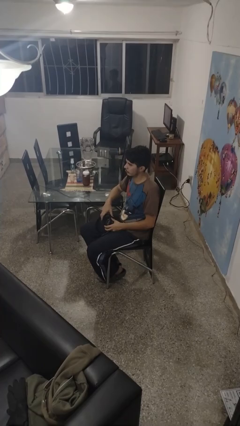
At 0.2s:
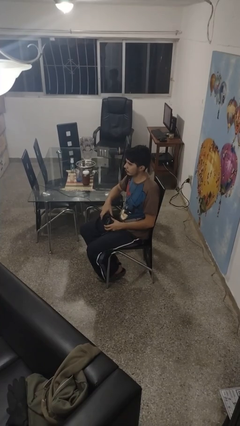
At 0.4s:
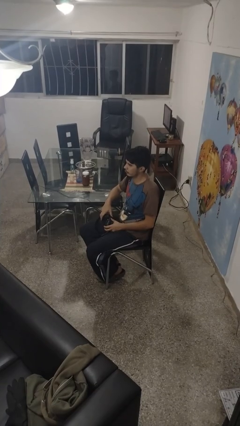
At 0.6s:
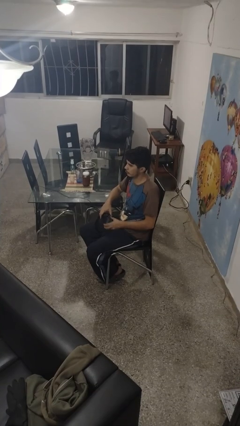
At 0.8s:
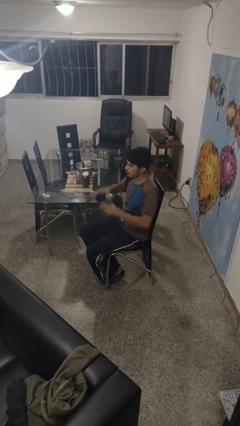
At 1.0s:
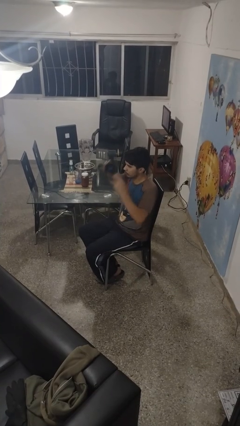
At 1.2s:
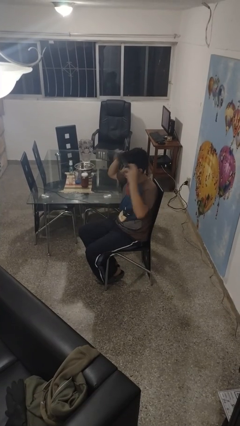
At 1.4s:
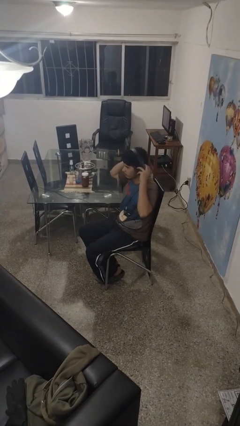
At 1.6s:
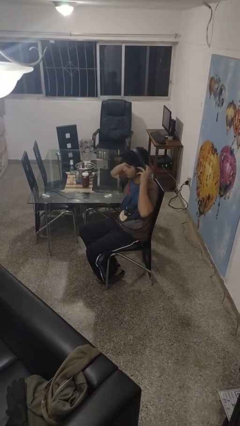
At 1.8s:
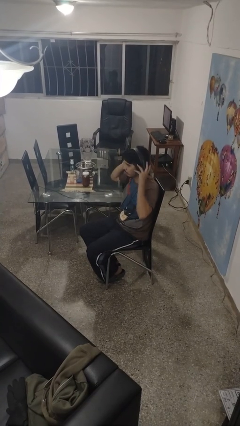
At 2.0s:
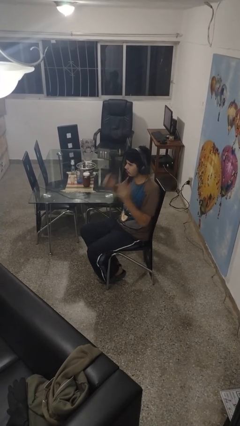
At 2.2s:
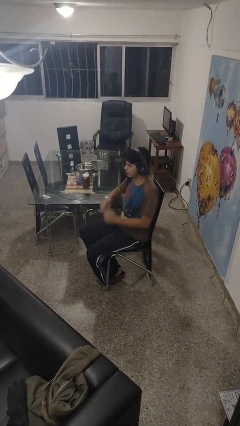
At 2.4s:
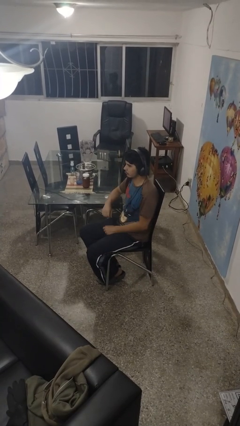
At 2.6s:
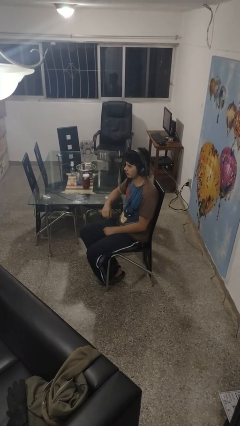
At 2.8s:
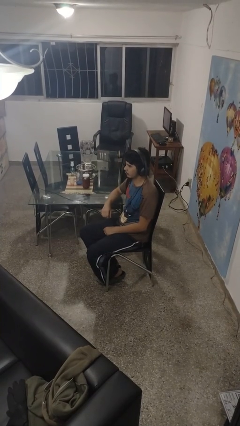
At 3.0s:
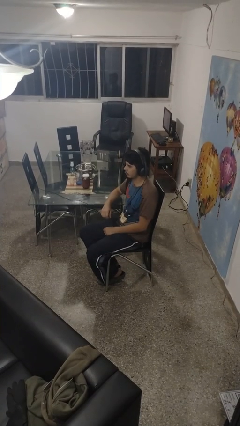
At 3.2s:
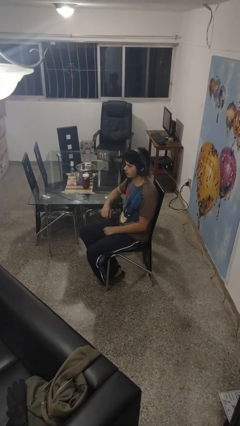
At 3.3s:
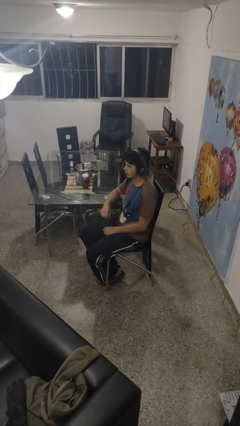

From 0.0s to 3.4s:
person puts on headphones

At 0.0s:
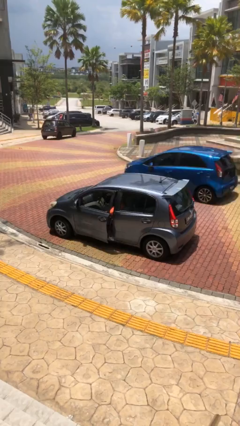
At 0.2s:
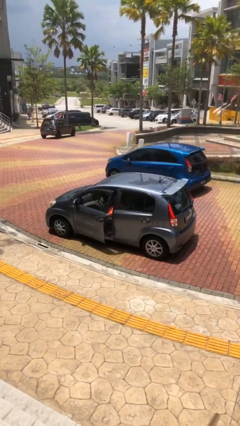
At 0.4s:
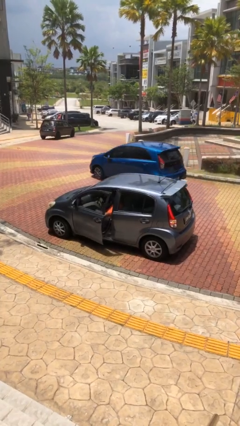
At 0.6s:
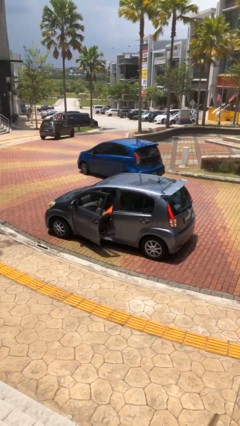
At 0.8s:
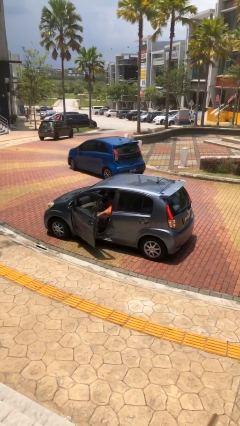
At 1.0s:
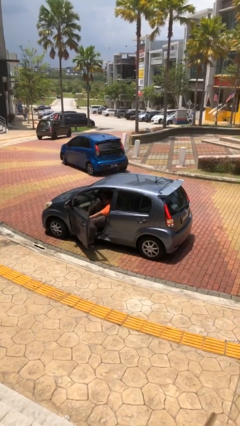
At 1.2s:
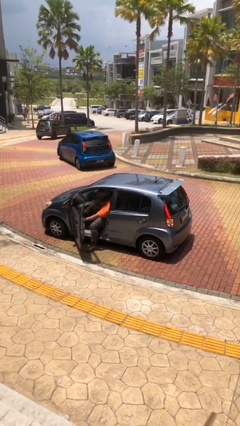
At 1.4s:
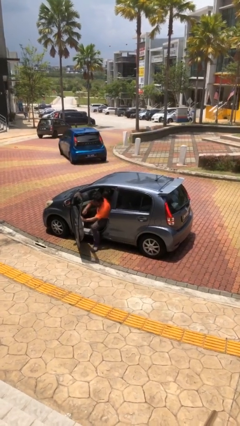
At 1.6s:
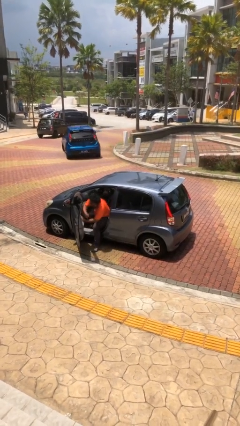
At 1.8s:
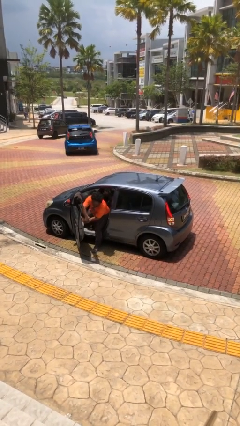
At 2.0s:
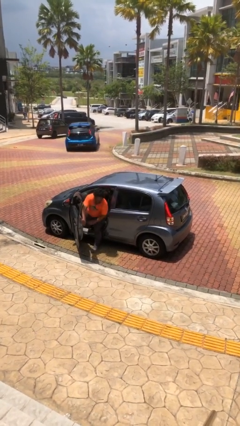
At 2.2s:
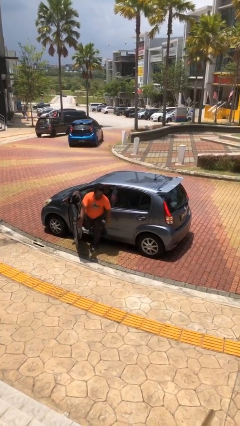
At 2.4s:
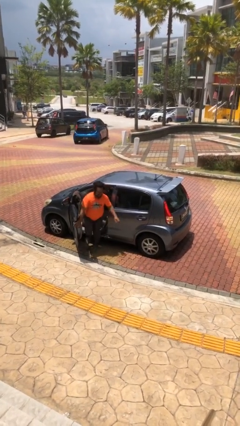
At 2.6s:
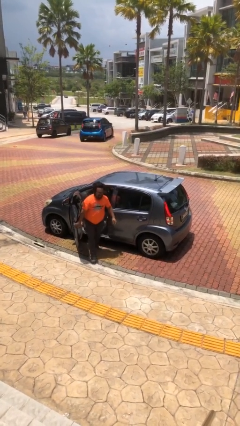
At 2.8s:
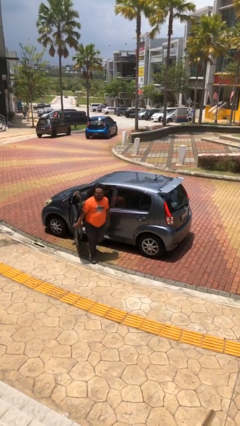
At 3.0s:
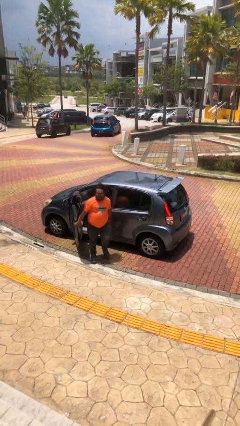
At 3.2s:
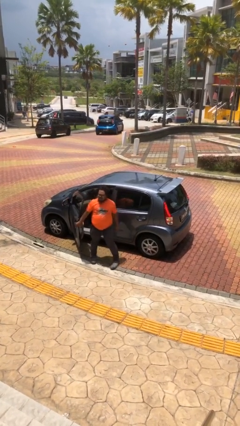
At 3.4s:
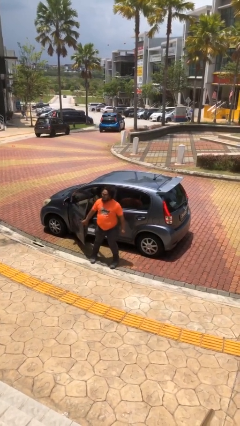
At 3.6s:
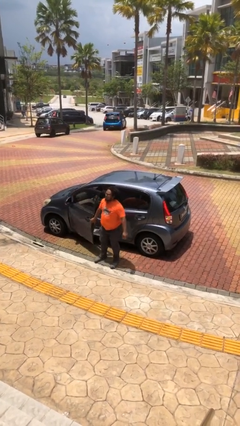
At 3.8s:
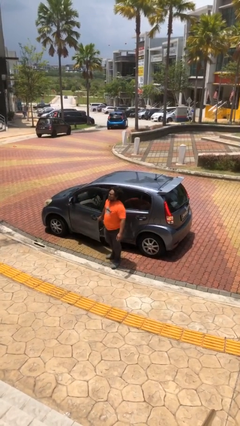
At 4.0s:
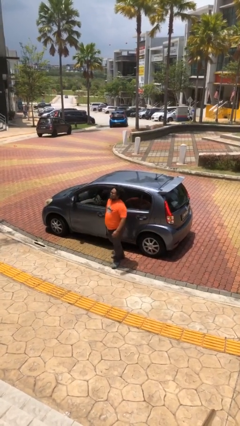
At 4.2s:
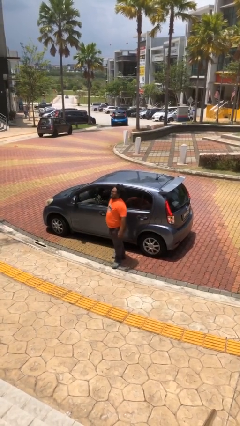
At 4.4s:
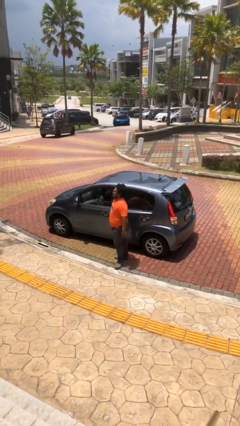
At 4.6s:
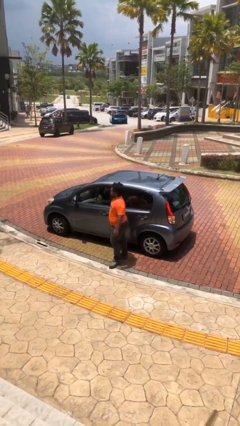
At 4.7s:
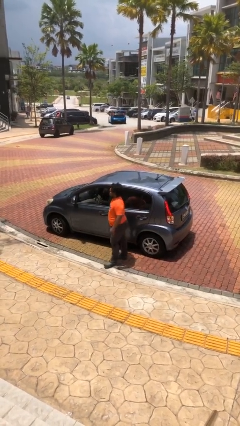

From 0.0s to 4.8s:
car drops off person

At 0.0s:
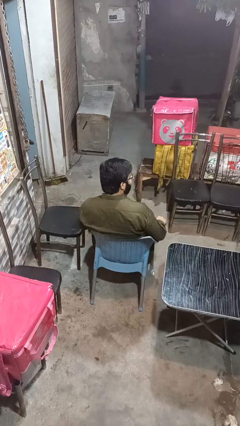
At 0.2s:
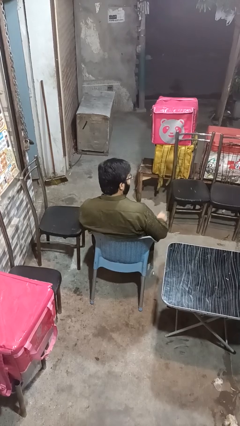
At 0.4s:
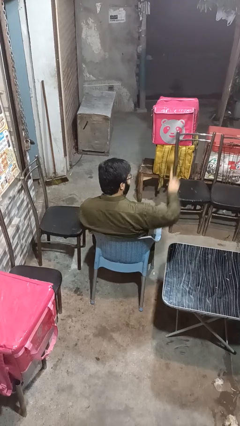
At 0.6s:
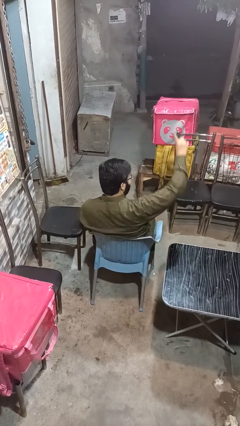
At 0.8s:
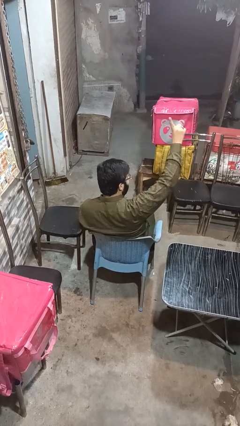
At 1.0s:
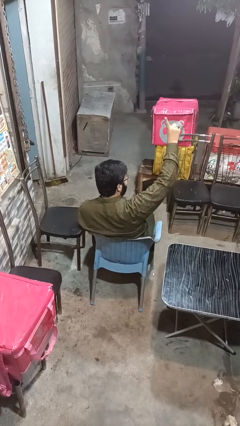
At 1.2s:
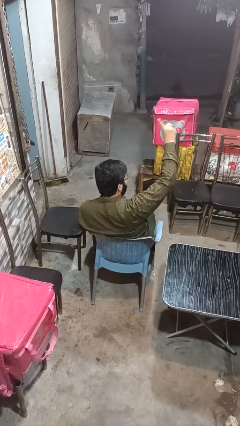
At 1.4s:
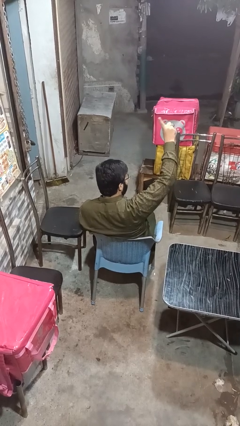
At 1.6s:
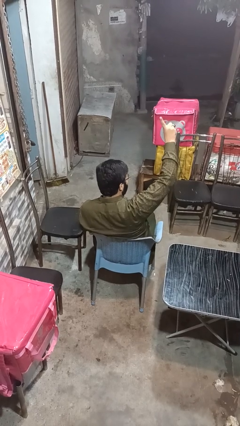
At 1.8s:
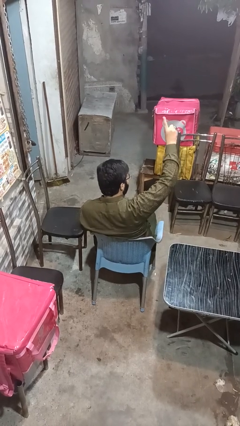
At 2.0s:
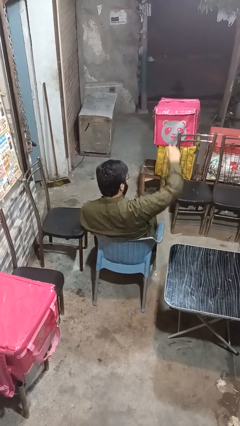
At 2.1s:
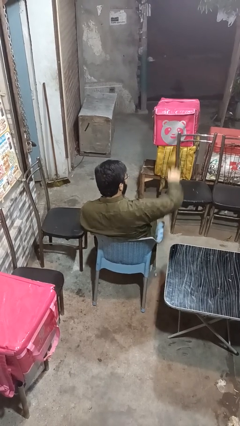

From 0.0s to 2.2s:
person gestures number one

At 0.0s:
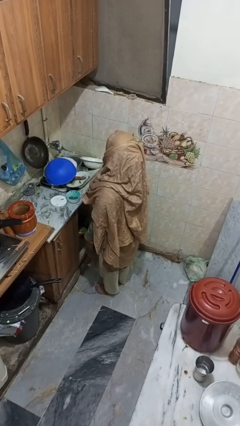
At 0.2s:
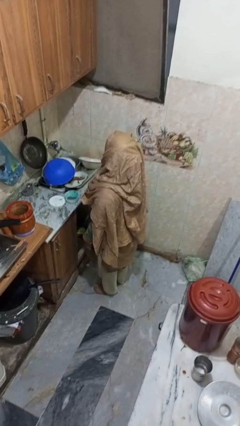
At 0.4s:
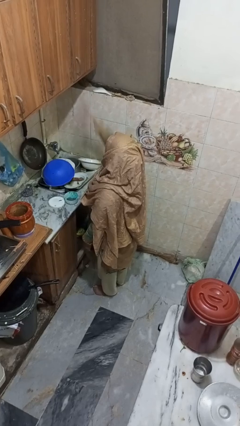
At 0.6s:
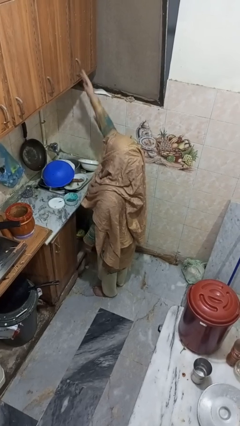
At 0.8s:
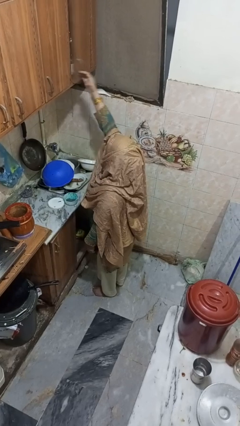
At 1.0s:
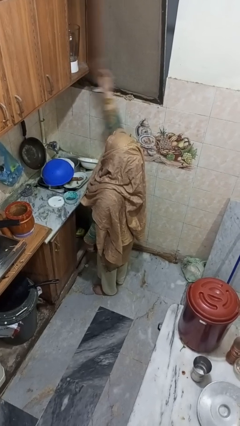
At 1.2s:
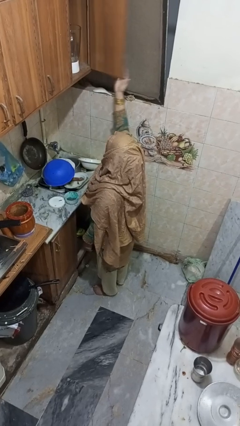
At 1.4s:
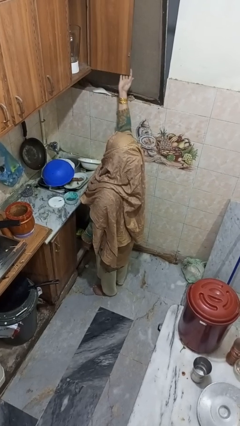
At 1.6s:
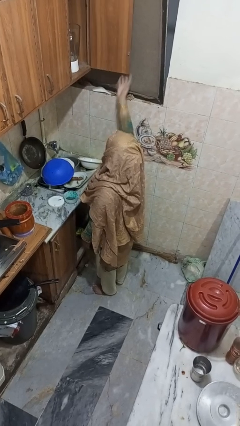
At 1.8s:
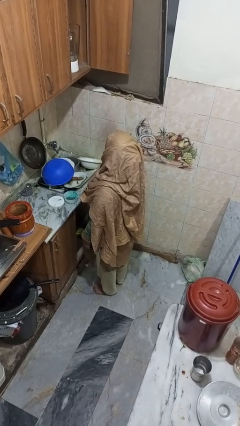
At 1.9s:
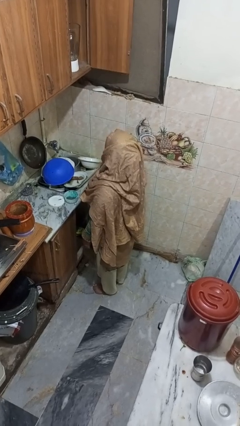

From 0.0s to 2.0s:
person opens cabinet

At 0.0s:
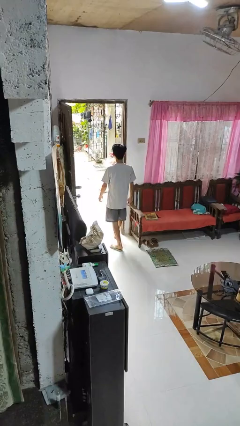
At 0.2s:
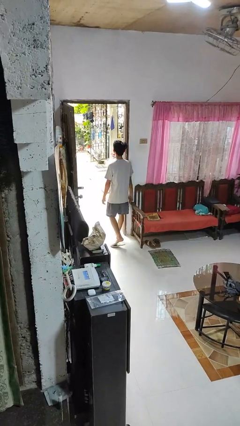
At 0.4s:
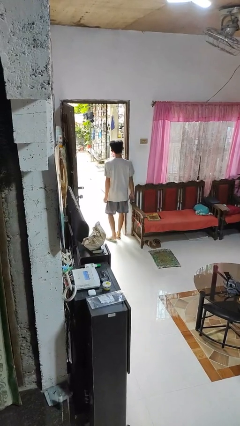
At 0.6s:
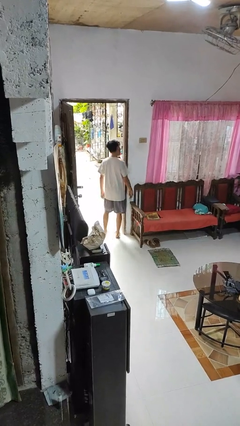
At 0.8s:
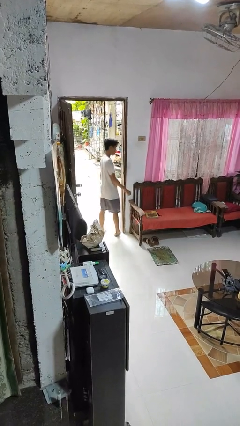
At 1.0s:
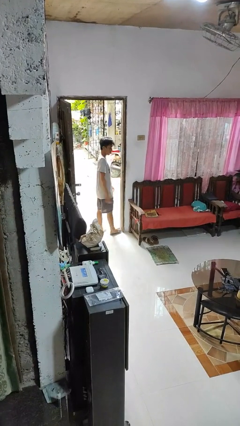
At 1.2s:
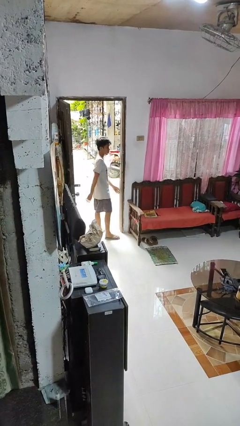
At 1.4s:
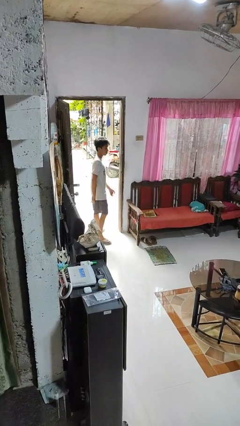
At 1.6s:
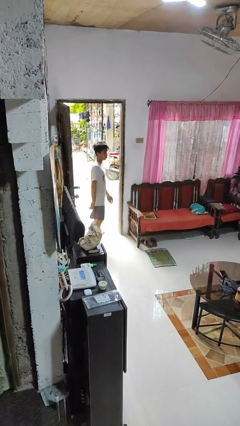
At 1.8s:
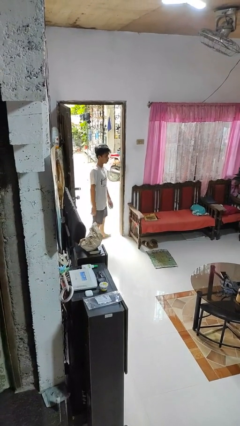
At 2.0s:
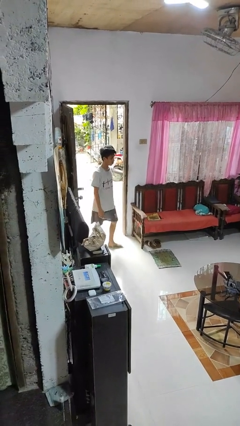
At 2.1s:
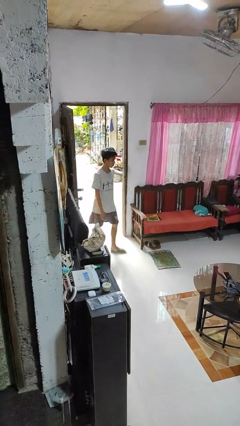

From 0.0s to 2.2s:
person bumps into wall

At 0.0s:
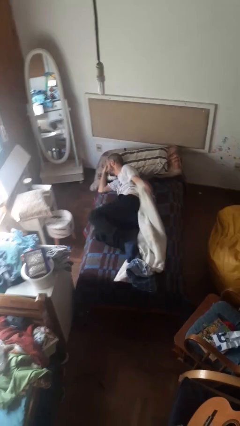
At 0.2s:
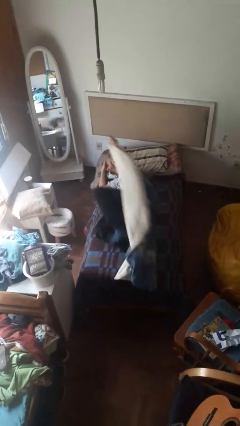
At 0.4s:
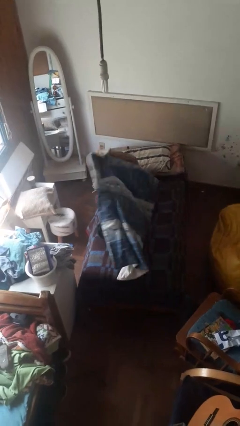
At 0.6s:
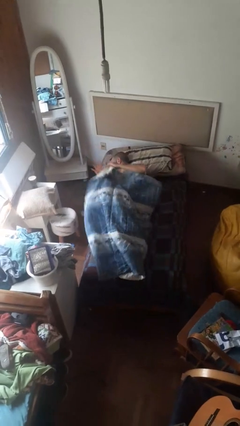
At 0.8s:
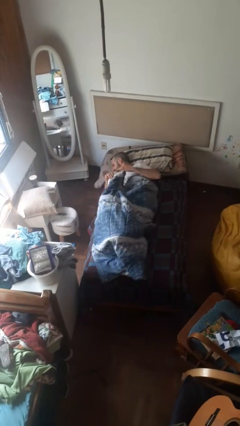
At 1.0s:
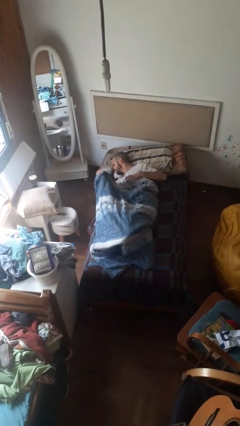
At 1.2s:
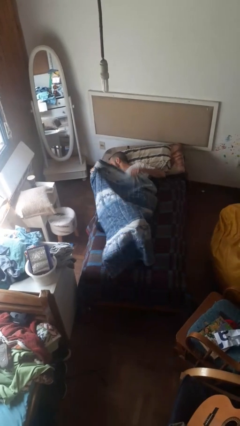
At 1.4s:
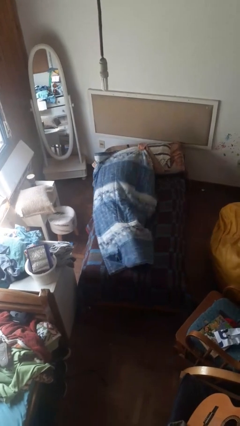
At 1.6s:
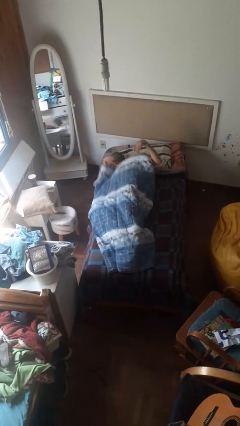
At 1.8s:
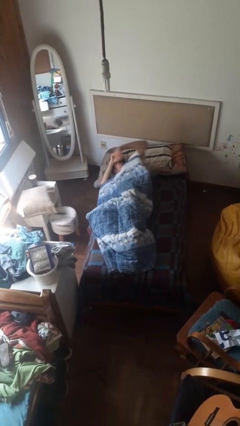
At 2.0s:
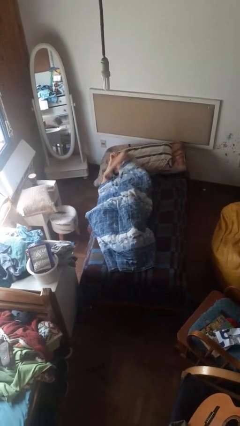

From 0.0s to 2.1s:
person covers with bedsheets

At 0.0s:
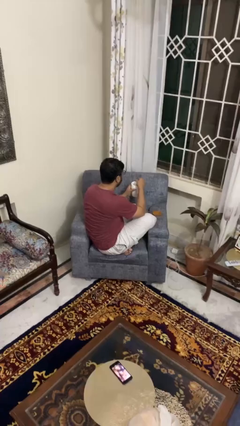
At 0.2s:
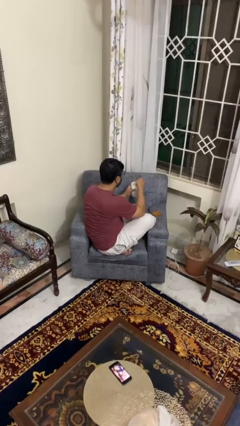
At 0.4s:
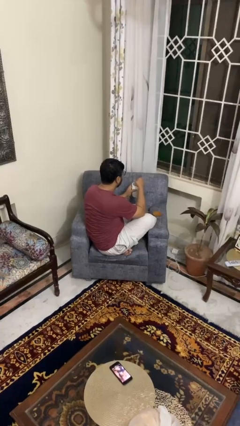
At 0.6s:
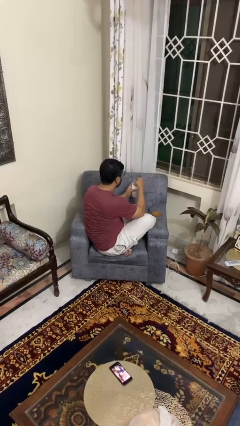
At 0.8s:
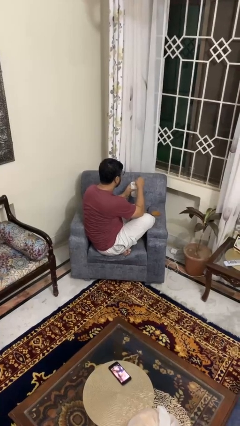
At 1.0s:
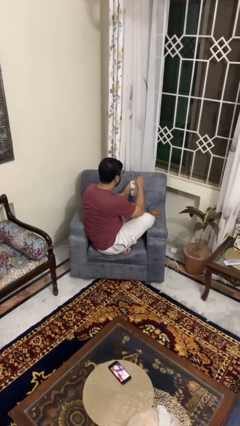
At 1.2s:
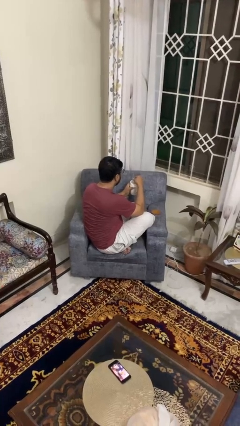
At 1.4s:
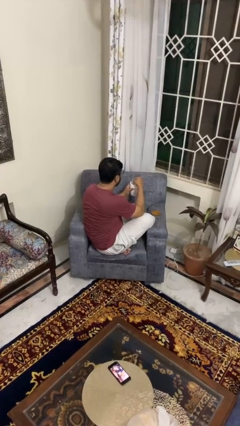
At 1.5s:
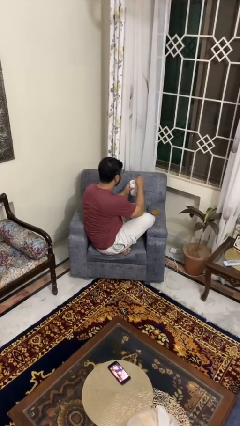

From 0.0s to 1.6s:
person stirs mug
